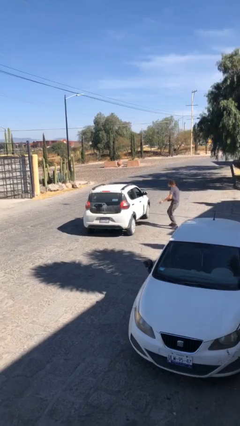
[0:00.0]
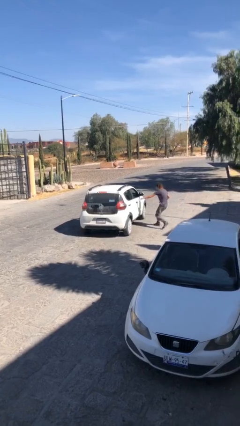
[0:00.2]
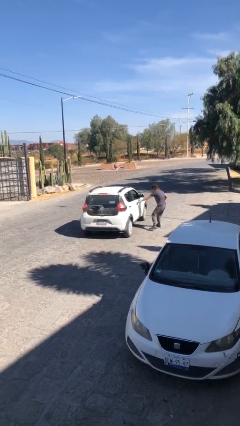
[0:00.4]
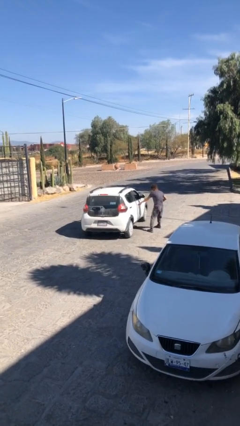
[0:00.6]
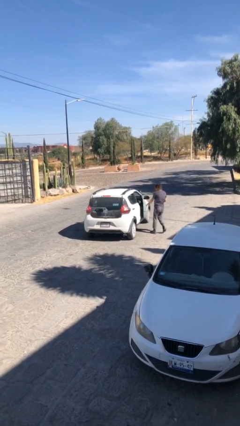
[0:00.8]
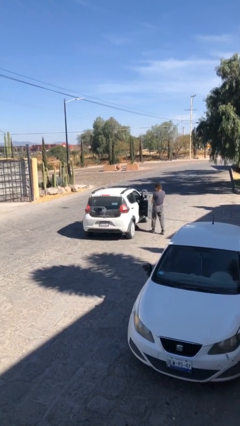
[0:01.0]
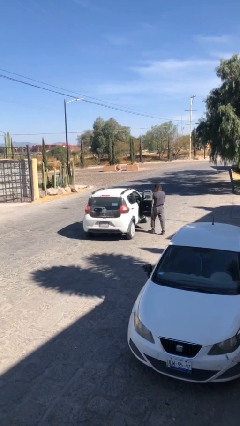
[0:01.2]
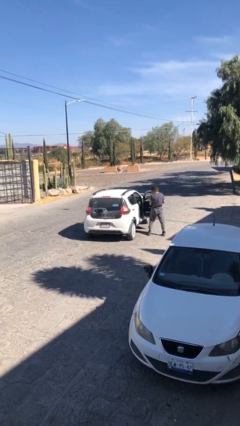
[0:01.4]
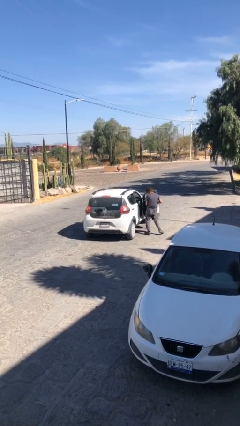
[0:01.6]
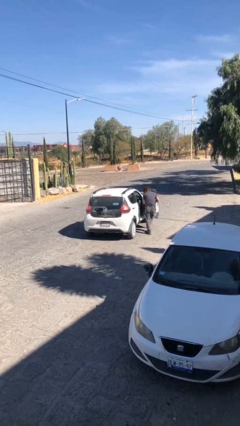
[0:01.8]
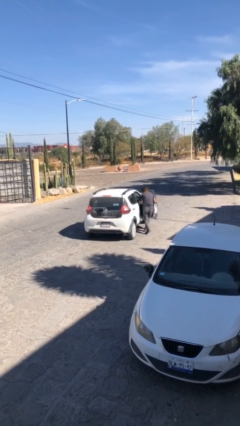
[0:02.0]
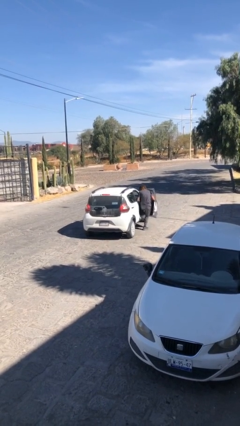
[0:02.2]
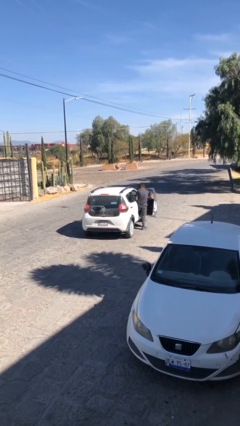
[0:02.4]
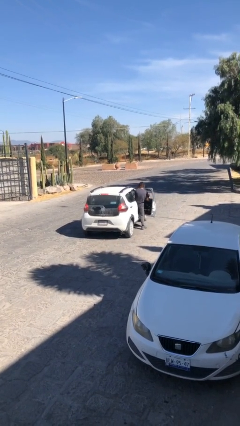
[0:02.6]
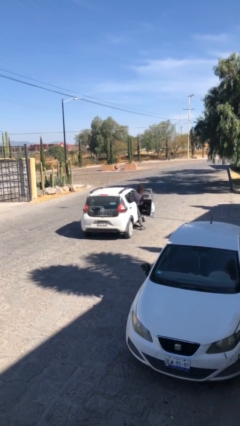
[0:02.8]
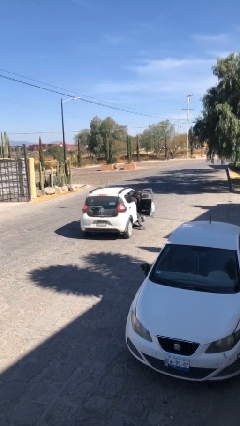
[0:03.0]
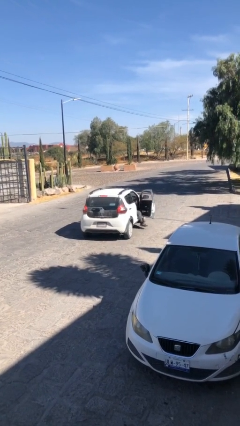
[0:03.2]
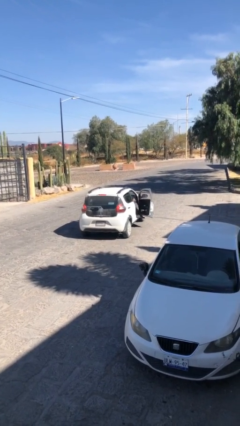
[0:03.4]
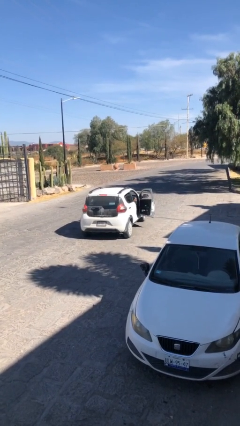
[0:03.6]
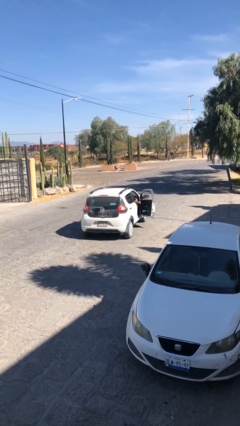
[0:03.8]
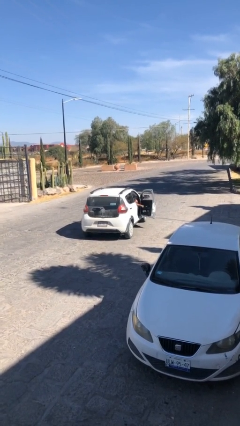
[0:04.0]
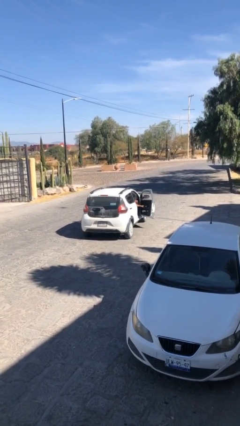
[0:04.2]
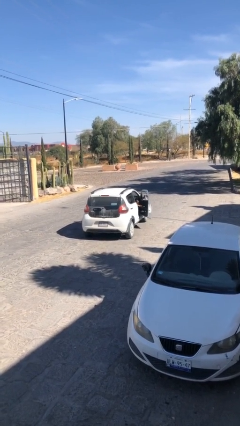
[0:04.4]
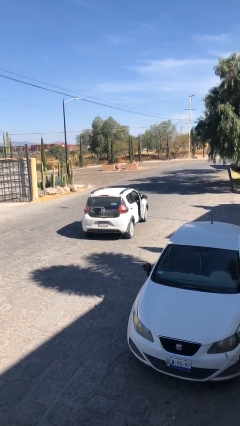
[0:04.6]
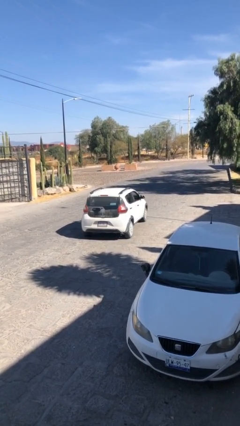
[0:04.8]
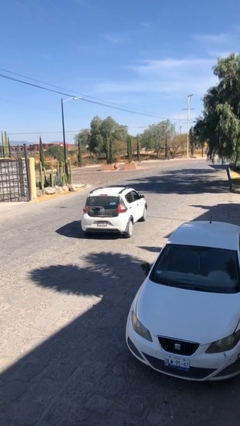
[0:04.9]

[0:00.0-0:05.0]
car picks up person

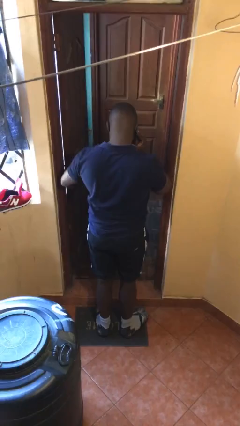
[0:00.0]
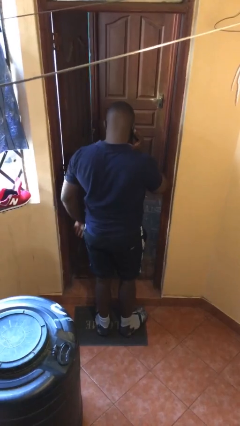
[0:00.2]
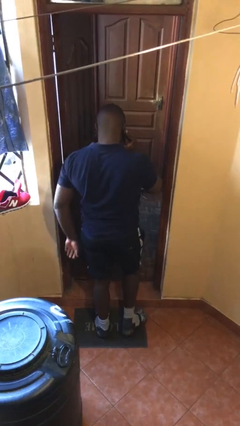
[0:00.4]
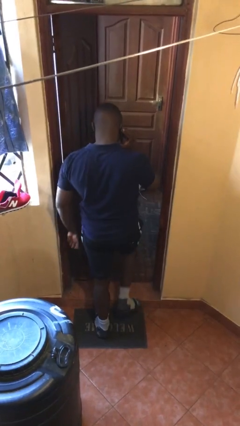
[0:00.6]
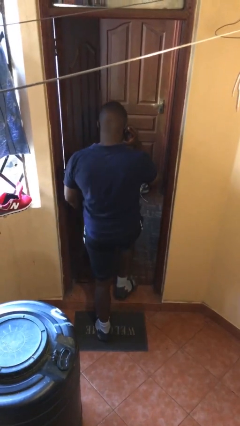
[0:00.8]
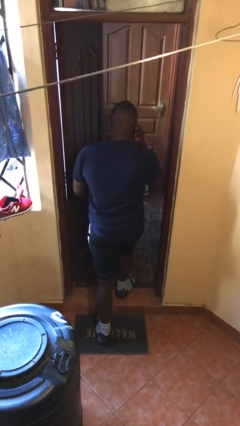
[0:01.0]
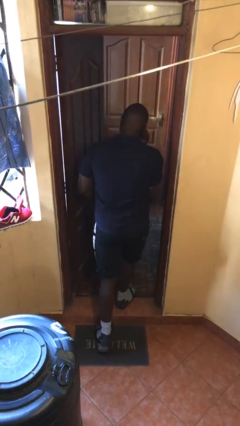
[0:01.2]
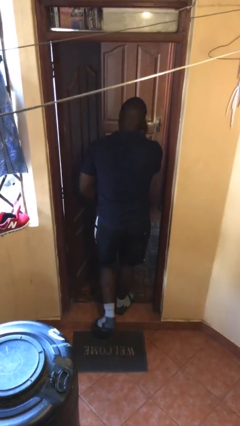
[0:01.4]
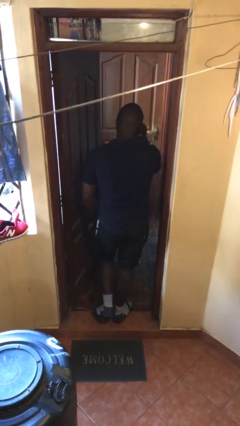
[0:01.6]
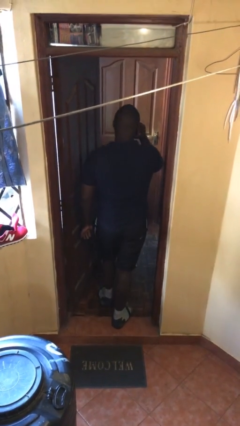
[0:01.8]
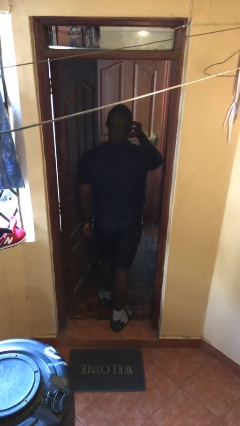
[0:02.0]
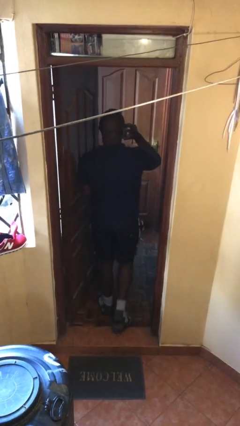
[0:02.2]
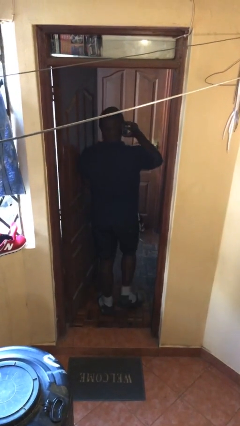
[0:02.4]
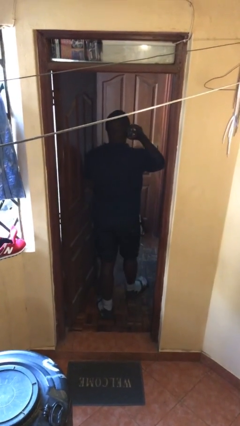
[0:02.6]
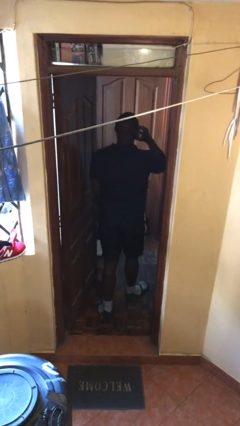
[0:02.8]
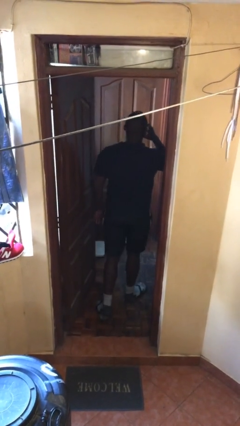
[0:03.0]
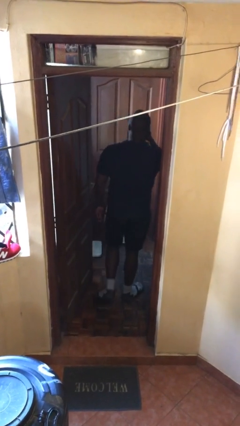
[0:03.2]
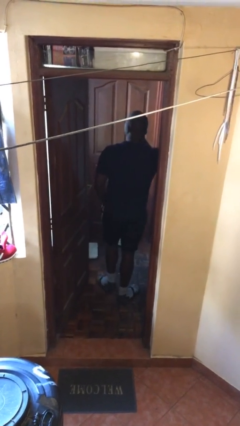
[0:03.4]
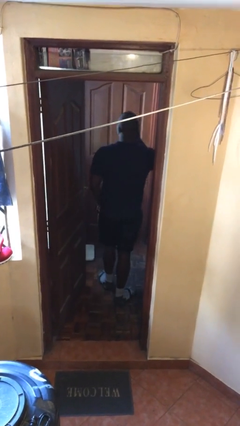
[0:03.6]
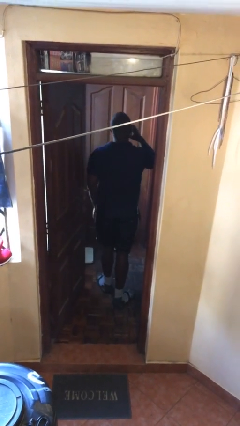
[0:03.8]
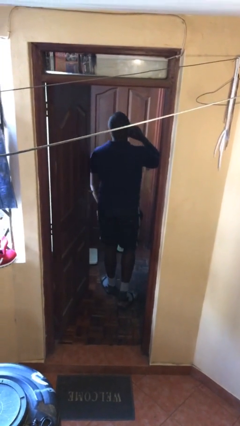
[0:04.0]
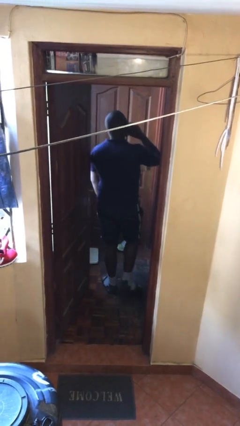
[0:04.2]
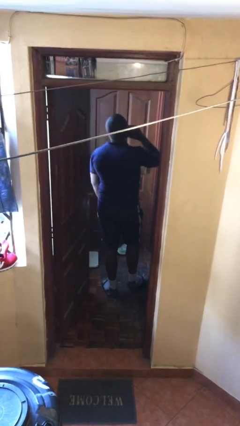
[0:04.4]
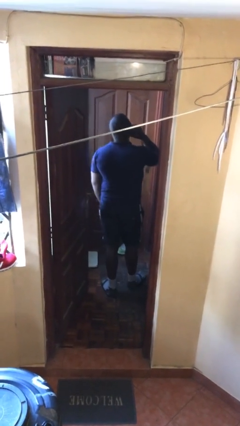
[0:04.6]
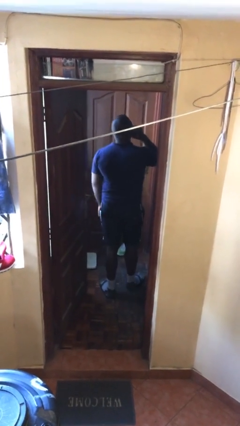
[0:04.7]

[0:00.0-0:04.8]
person exits scene through structure

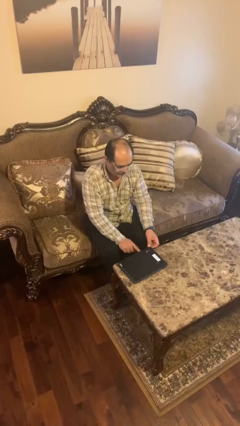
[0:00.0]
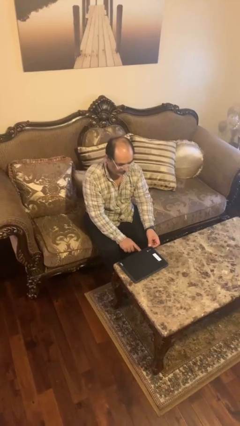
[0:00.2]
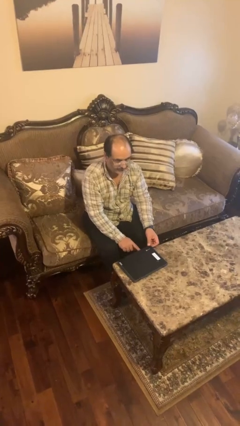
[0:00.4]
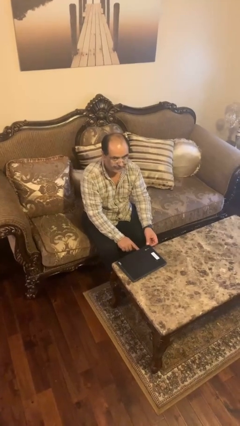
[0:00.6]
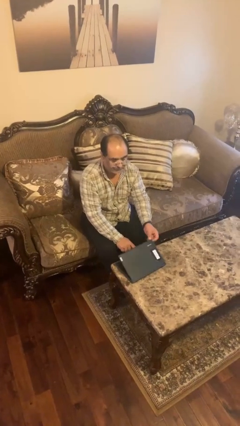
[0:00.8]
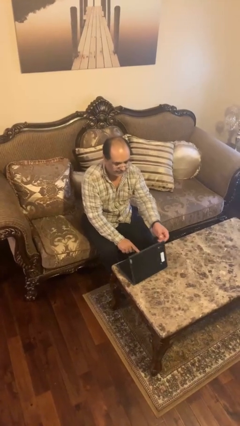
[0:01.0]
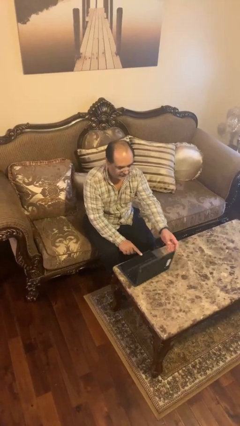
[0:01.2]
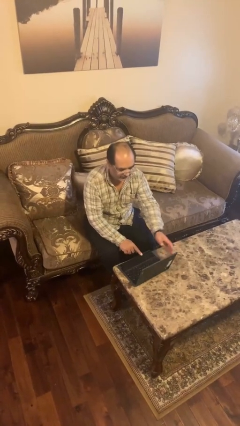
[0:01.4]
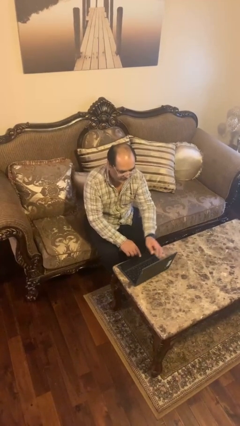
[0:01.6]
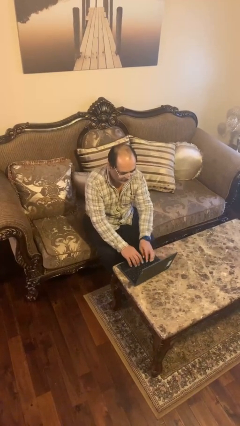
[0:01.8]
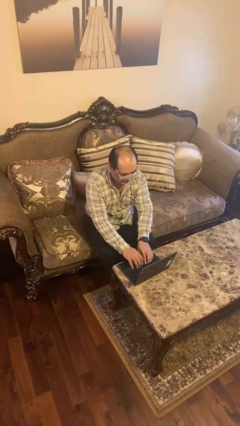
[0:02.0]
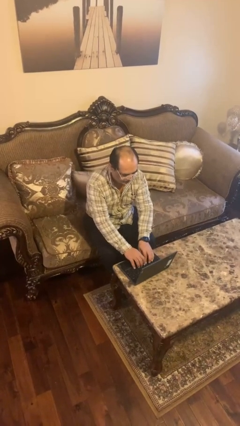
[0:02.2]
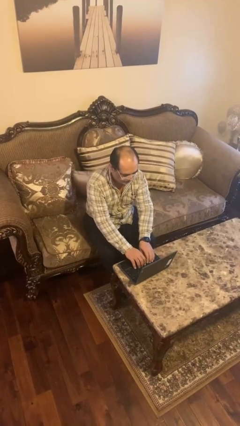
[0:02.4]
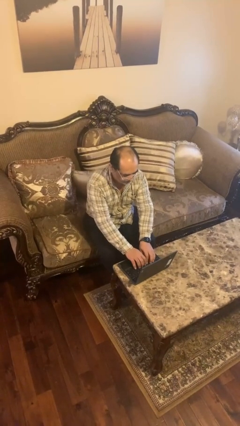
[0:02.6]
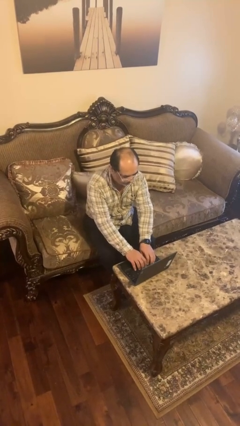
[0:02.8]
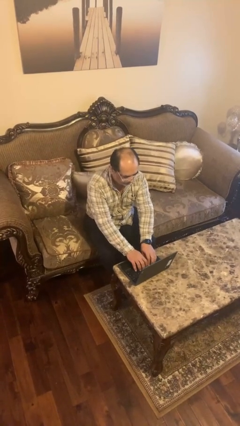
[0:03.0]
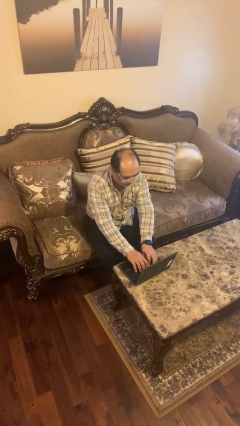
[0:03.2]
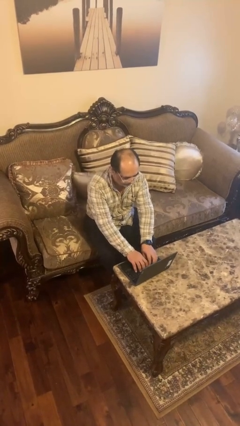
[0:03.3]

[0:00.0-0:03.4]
person interacts with laptop

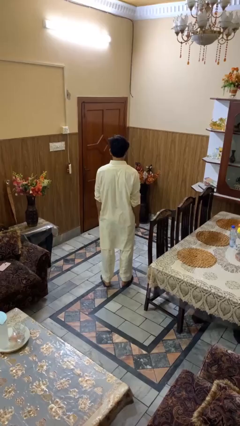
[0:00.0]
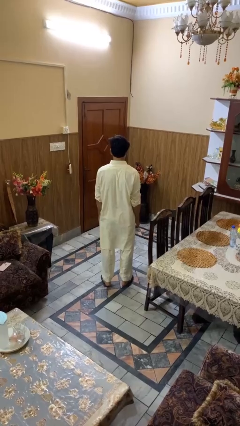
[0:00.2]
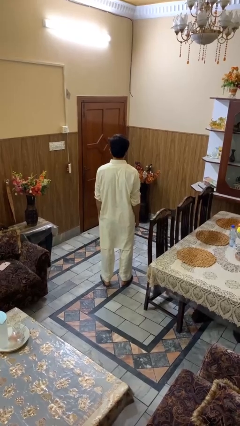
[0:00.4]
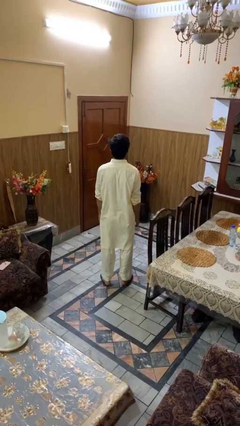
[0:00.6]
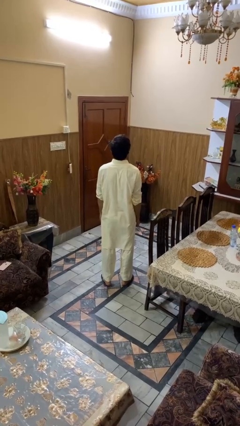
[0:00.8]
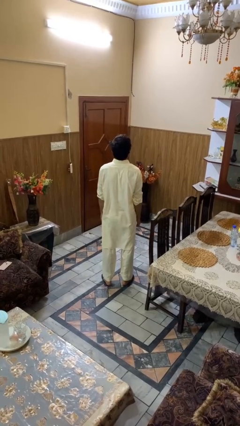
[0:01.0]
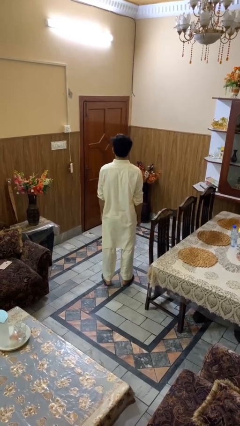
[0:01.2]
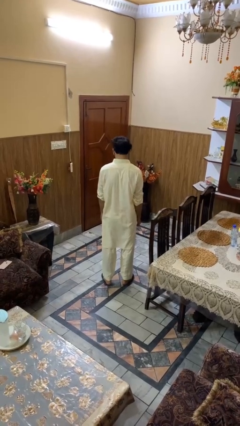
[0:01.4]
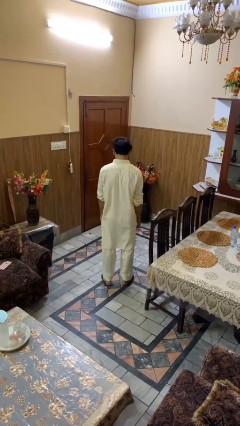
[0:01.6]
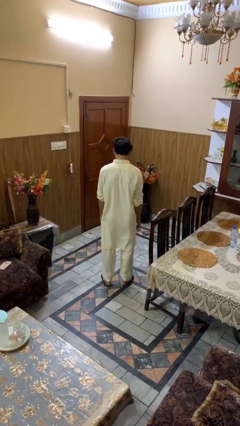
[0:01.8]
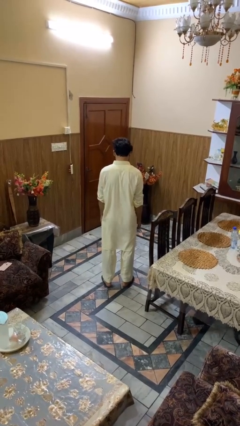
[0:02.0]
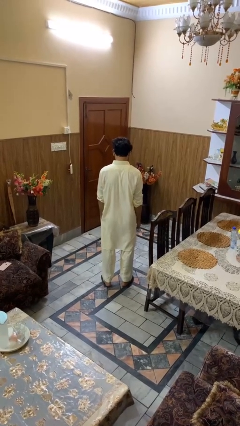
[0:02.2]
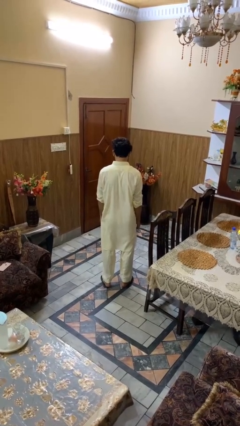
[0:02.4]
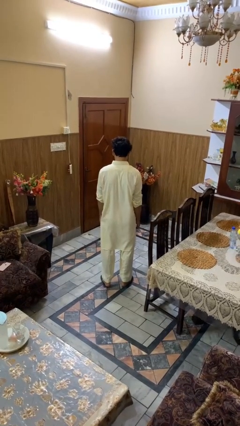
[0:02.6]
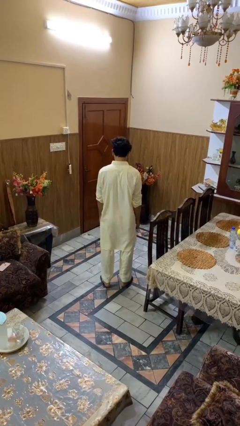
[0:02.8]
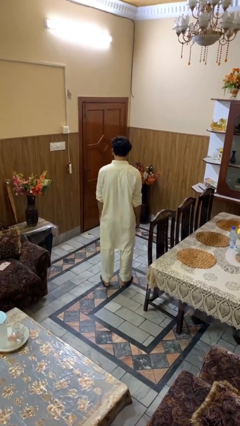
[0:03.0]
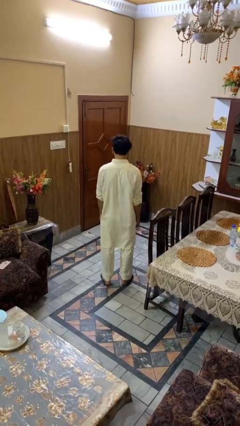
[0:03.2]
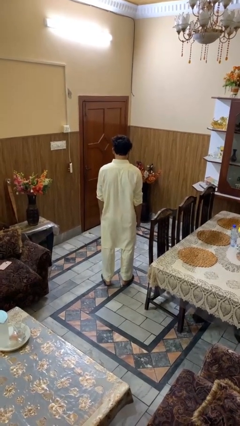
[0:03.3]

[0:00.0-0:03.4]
person nods head

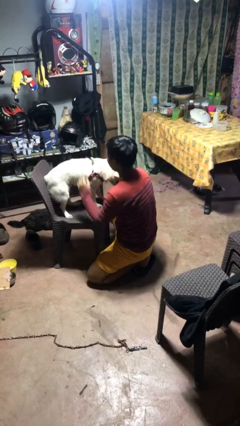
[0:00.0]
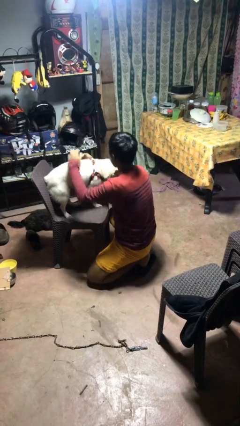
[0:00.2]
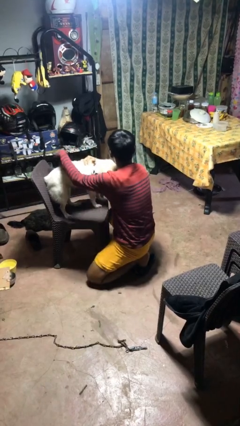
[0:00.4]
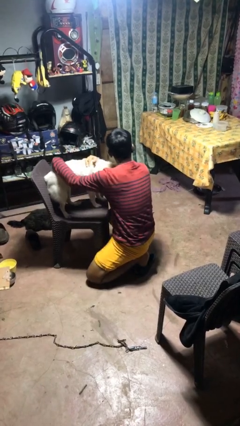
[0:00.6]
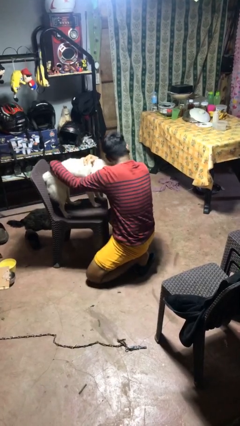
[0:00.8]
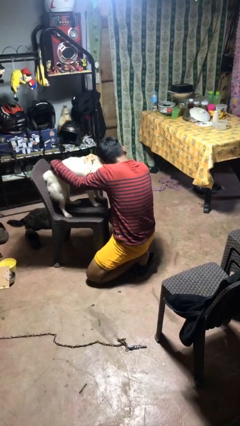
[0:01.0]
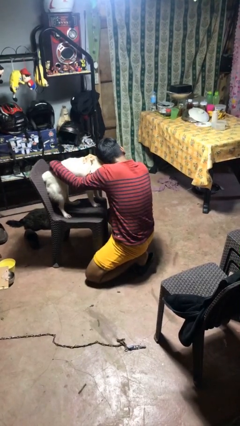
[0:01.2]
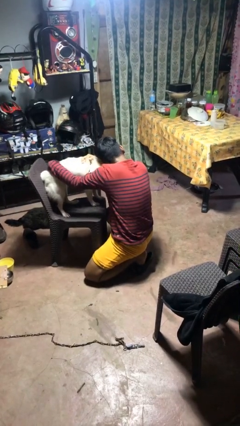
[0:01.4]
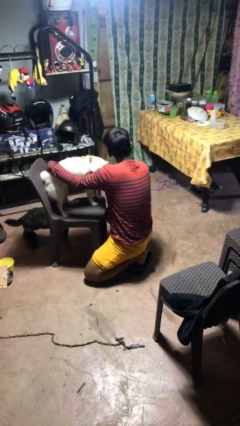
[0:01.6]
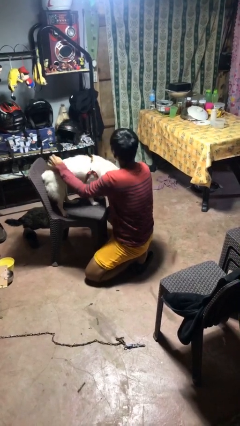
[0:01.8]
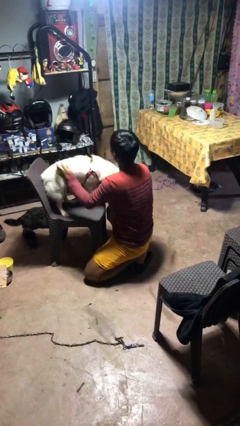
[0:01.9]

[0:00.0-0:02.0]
person hugs dog
